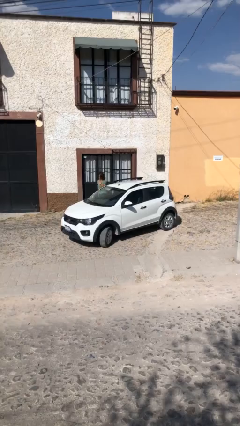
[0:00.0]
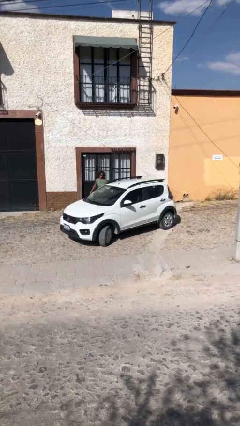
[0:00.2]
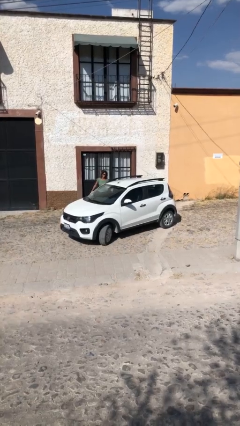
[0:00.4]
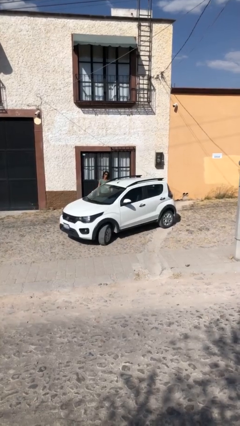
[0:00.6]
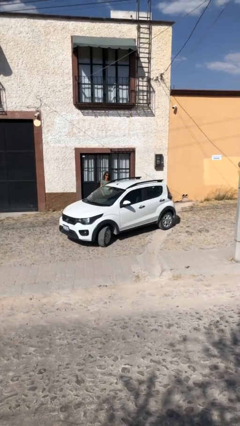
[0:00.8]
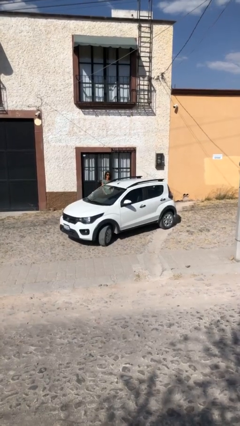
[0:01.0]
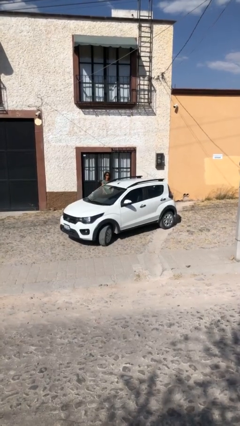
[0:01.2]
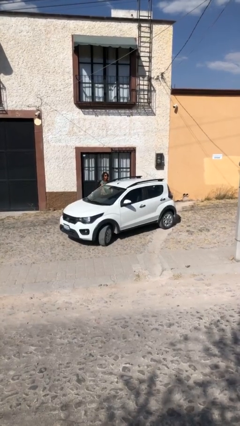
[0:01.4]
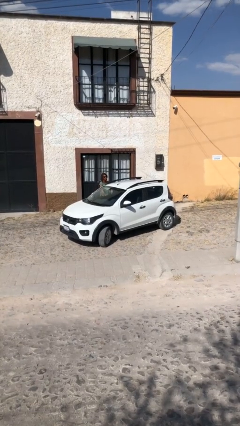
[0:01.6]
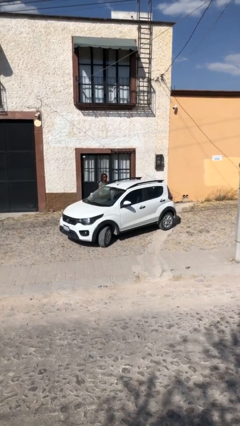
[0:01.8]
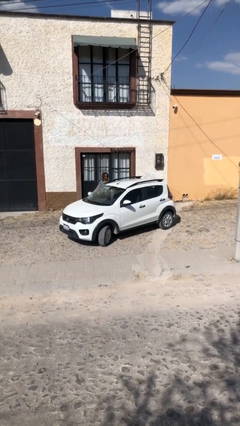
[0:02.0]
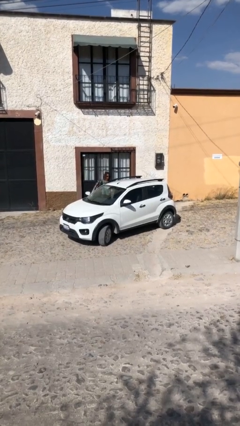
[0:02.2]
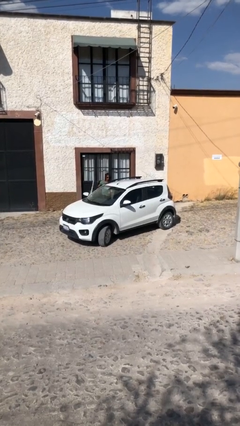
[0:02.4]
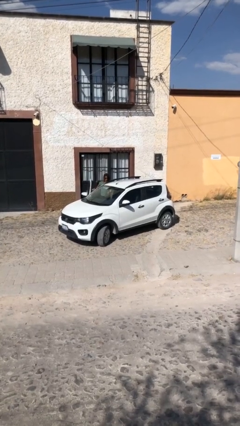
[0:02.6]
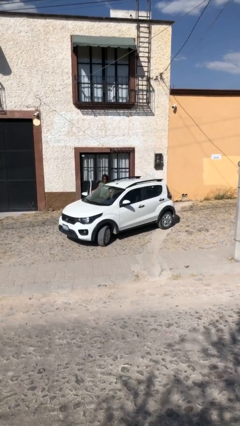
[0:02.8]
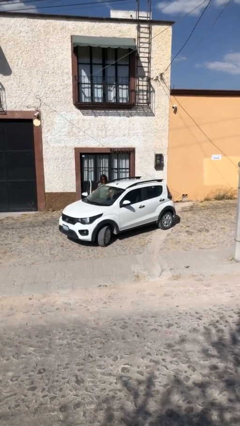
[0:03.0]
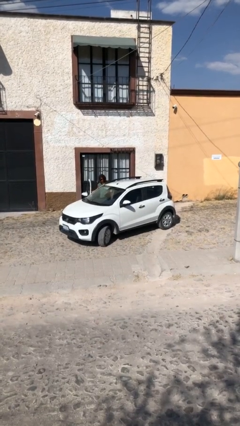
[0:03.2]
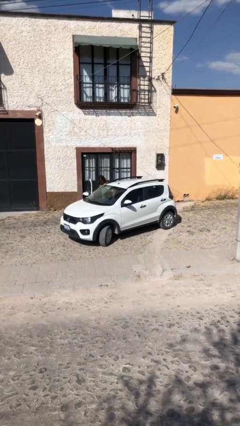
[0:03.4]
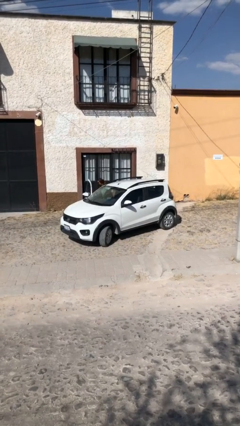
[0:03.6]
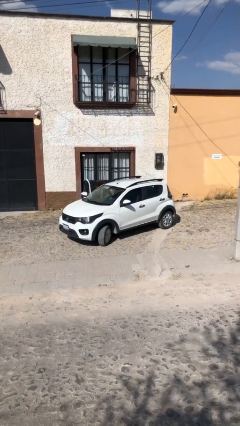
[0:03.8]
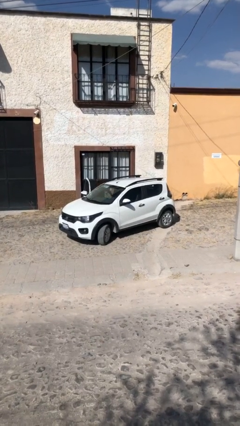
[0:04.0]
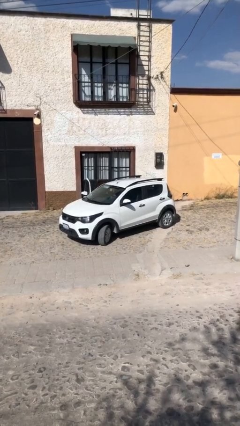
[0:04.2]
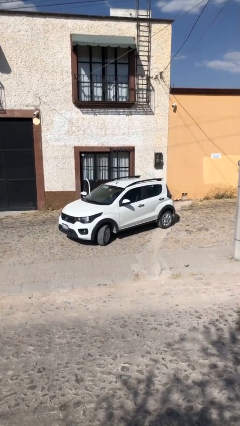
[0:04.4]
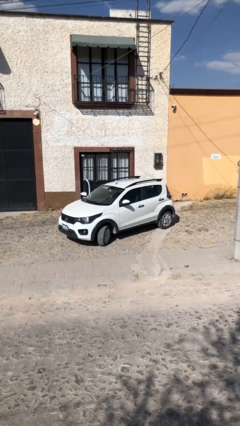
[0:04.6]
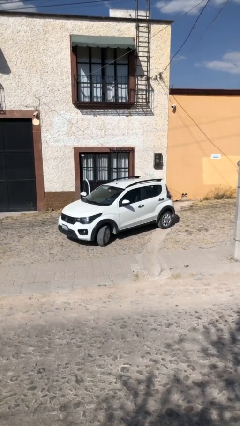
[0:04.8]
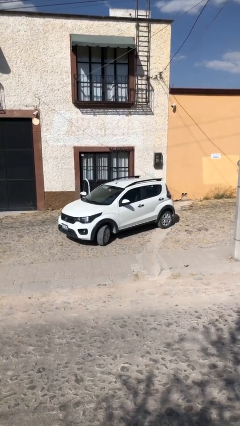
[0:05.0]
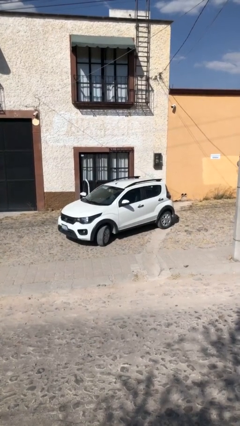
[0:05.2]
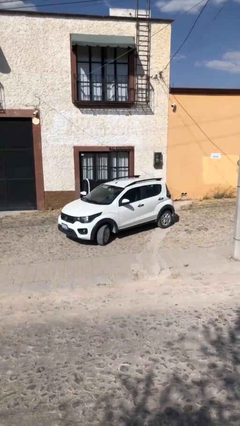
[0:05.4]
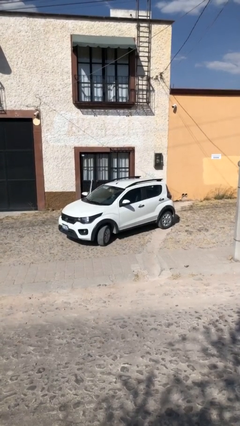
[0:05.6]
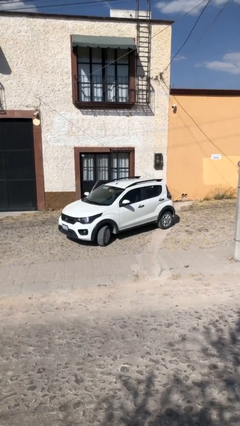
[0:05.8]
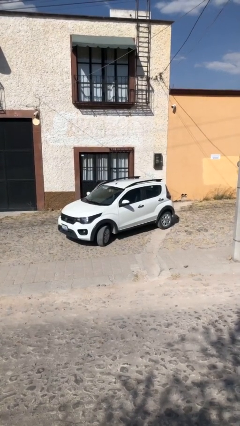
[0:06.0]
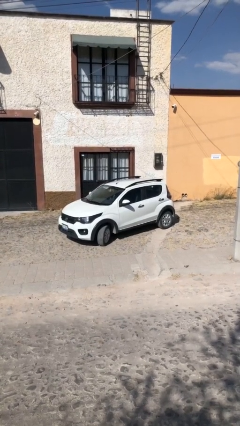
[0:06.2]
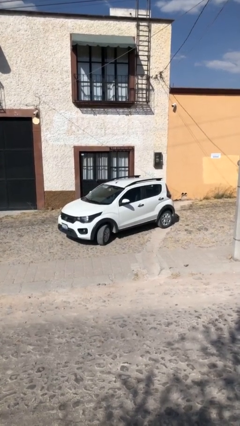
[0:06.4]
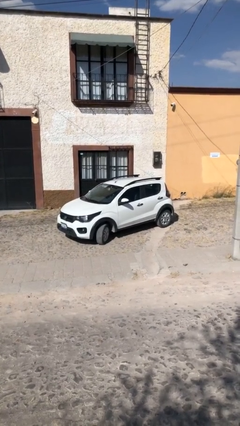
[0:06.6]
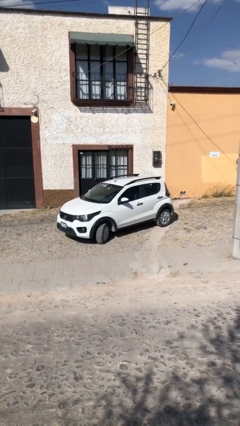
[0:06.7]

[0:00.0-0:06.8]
car picks up person

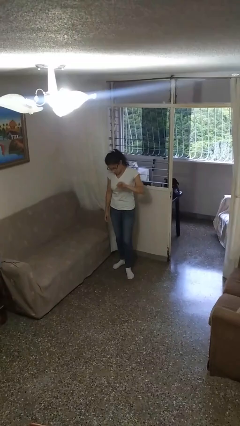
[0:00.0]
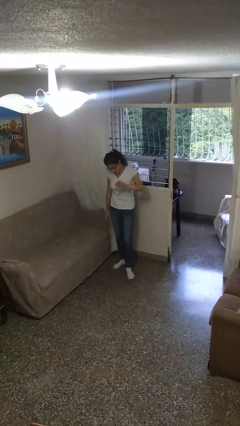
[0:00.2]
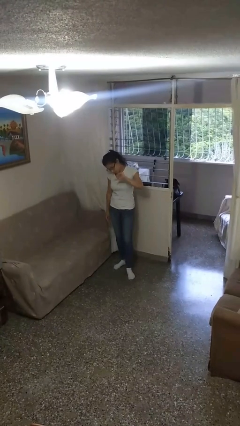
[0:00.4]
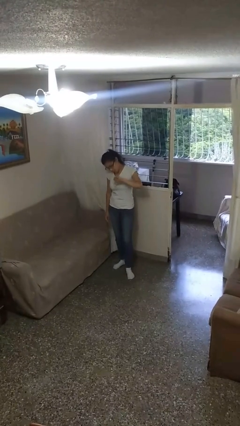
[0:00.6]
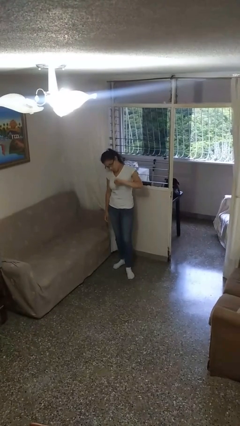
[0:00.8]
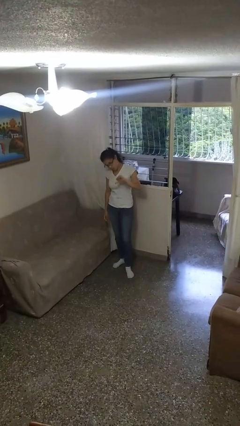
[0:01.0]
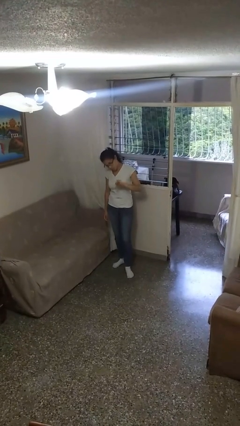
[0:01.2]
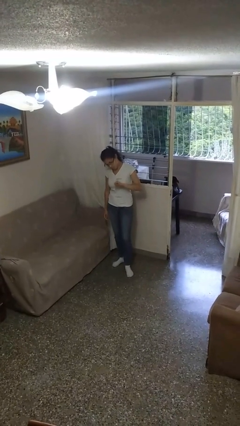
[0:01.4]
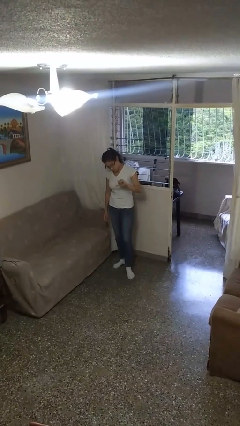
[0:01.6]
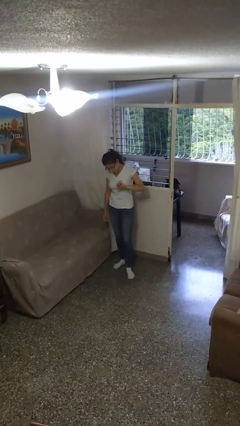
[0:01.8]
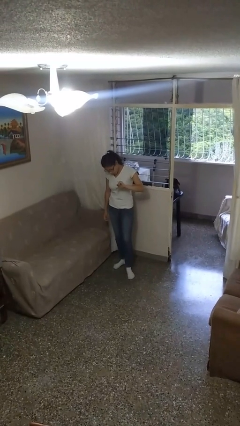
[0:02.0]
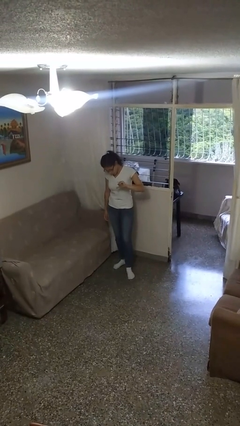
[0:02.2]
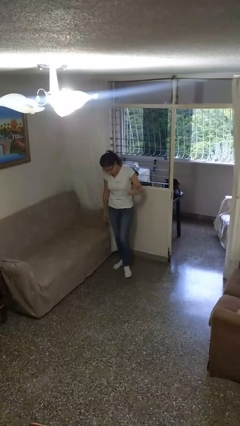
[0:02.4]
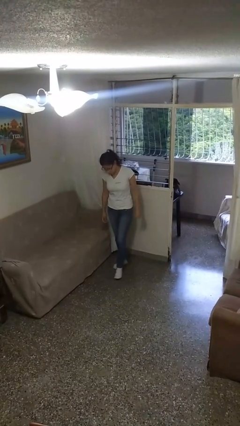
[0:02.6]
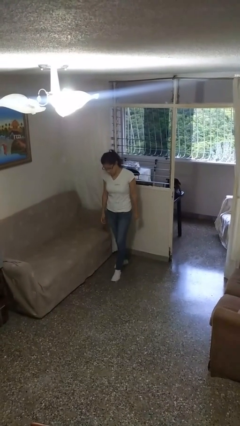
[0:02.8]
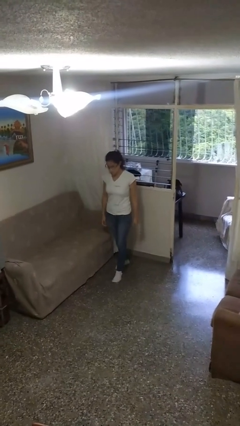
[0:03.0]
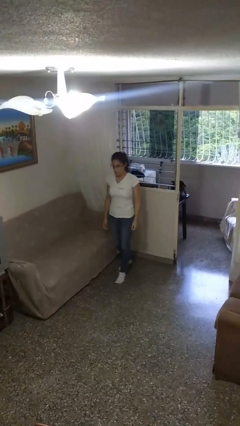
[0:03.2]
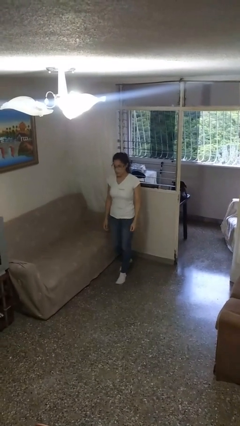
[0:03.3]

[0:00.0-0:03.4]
person gestures thumbs down

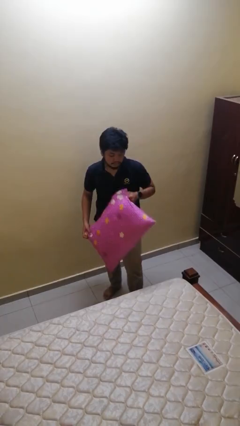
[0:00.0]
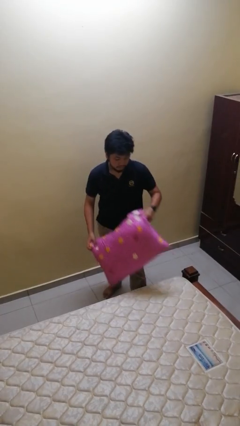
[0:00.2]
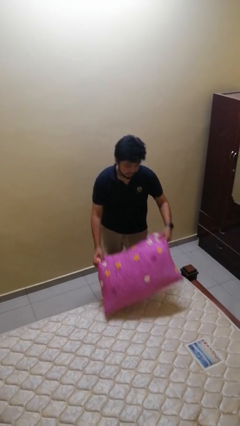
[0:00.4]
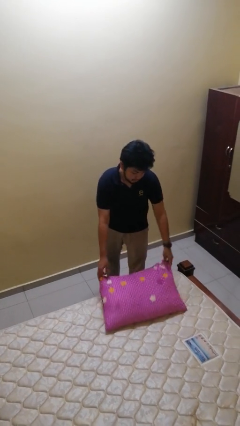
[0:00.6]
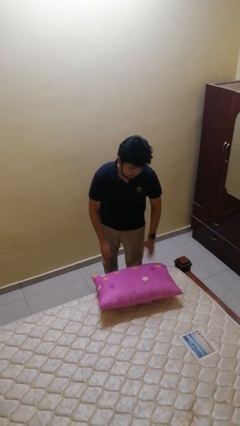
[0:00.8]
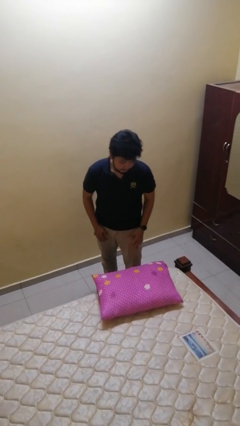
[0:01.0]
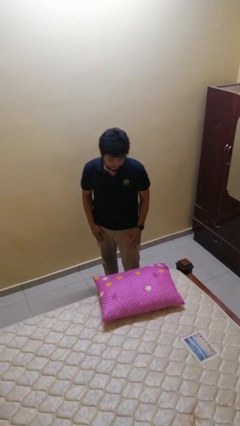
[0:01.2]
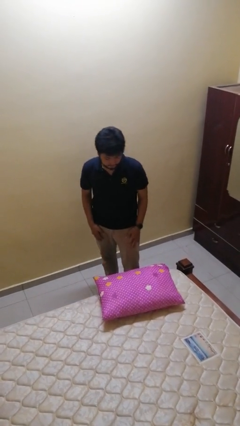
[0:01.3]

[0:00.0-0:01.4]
person puts down object on bed

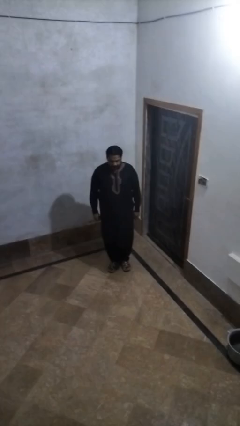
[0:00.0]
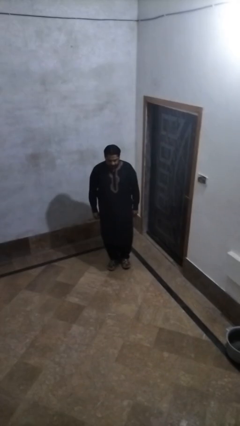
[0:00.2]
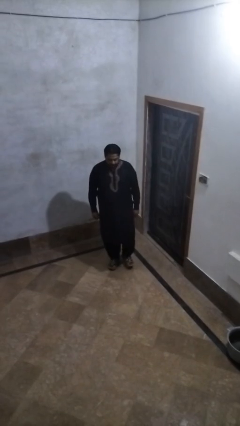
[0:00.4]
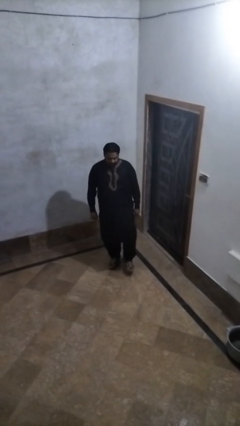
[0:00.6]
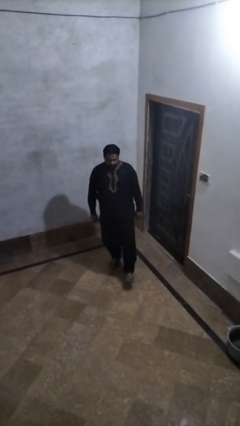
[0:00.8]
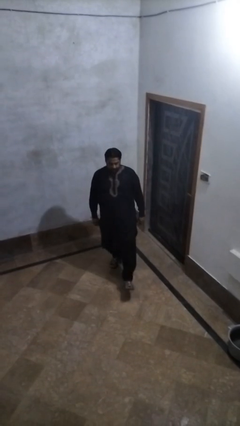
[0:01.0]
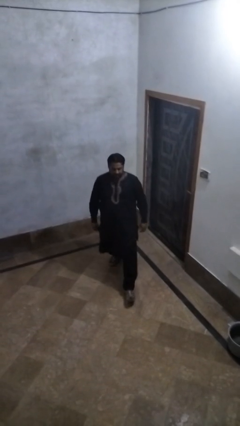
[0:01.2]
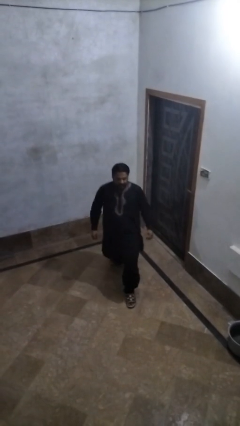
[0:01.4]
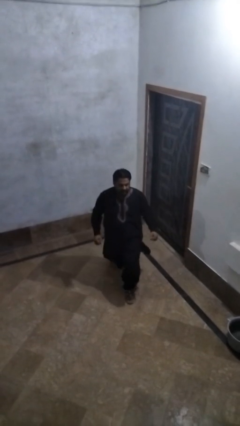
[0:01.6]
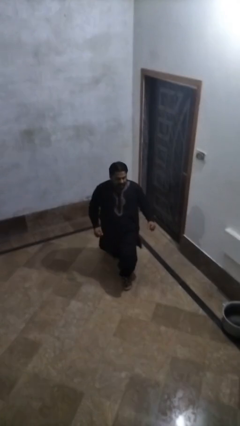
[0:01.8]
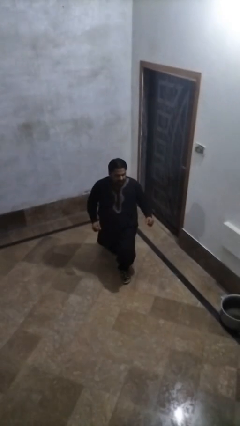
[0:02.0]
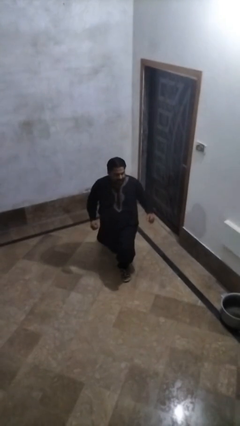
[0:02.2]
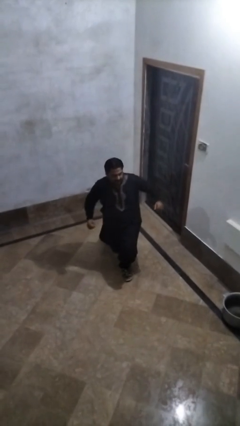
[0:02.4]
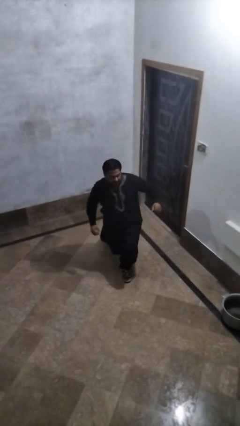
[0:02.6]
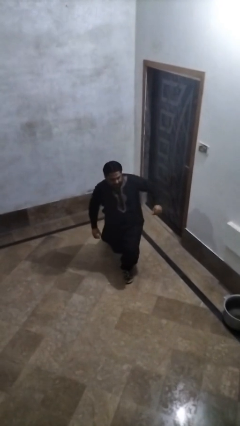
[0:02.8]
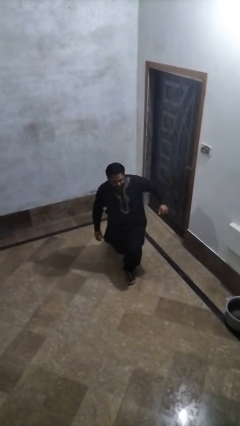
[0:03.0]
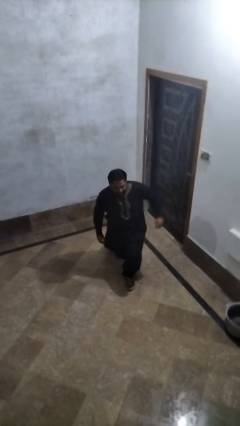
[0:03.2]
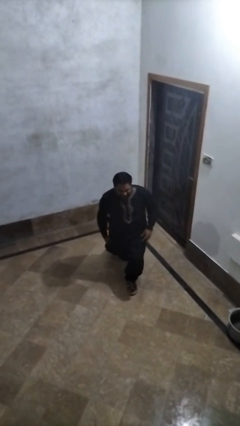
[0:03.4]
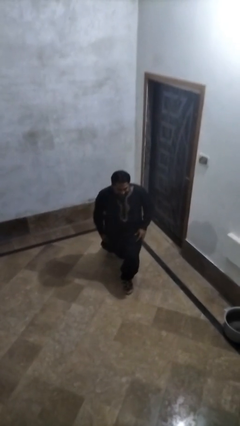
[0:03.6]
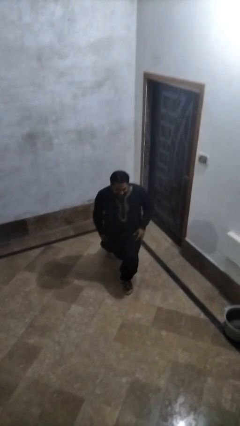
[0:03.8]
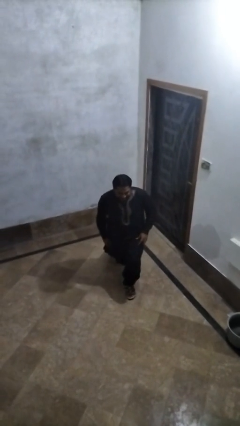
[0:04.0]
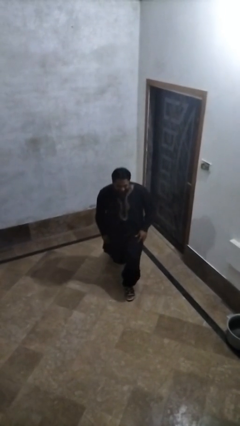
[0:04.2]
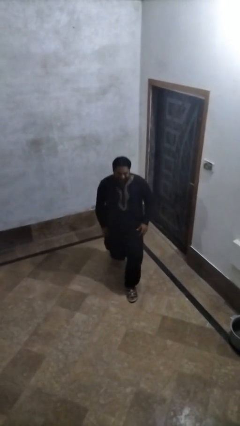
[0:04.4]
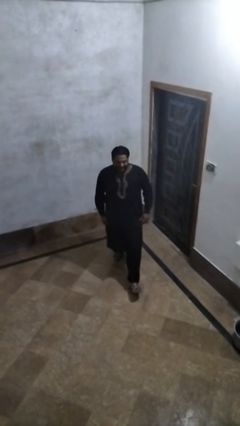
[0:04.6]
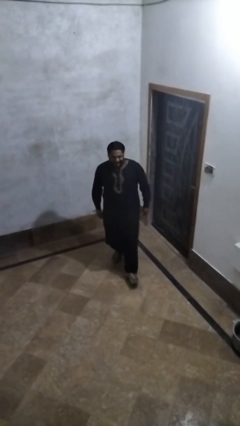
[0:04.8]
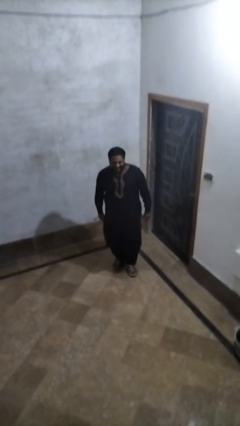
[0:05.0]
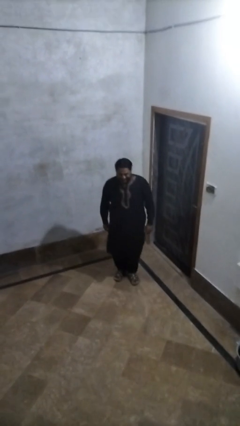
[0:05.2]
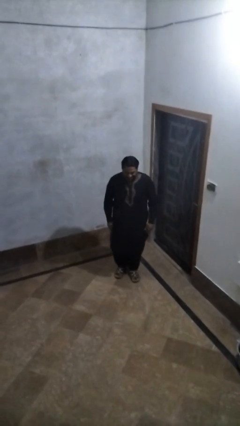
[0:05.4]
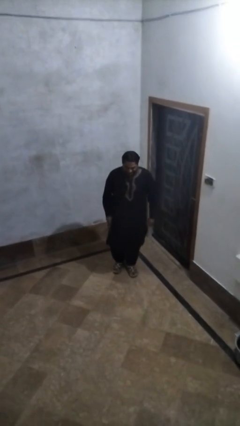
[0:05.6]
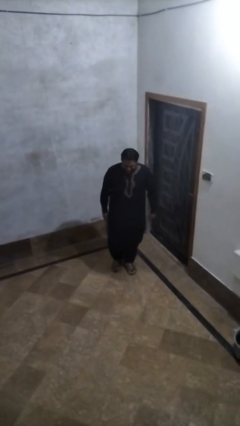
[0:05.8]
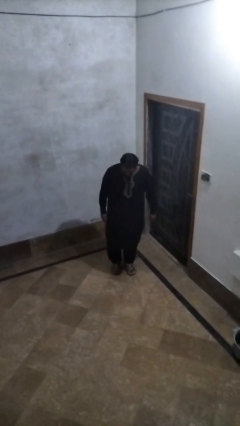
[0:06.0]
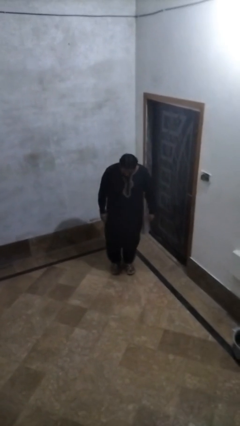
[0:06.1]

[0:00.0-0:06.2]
person exercises with lunges
